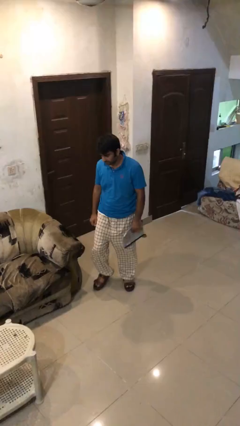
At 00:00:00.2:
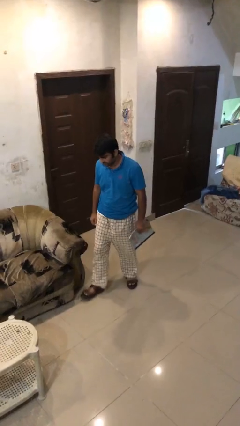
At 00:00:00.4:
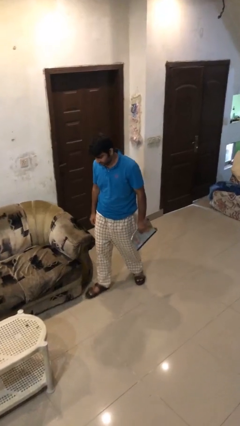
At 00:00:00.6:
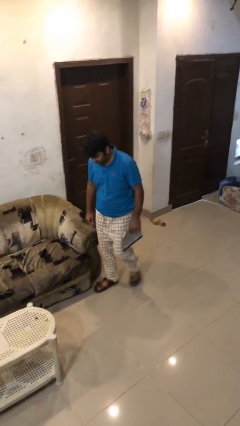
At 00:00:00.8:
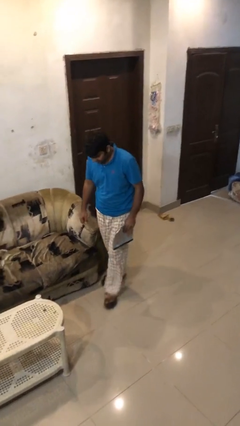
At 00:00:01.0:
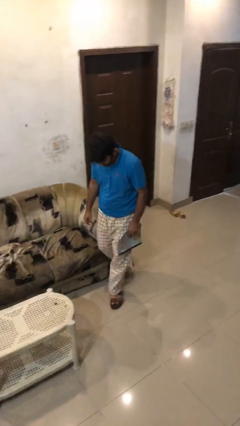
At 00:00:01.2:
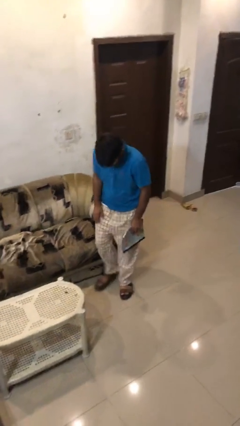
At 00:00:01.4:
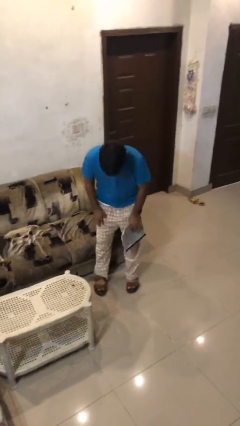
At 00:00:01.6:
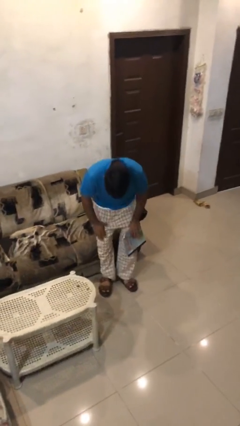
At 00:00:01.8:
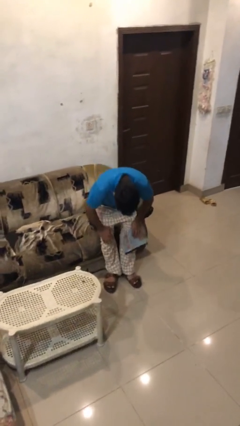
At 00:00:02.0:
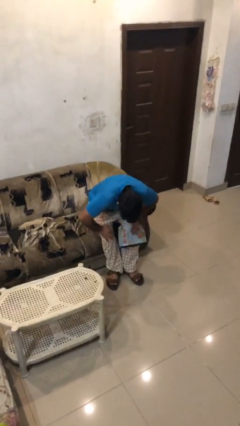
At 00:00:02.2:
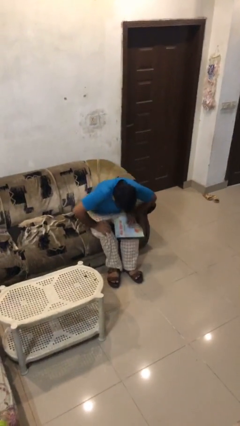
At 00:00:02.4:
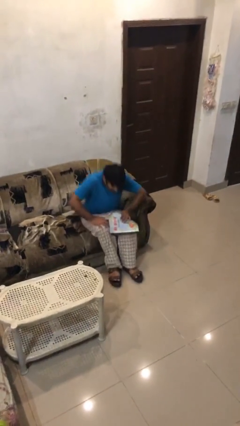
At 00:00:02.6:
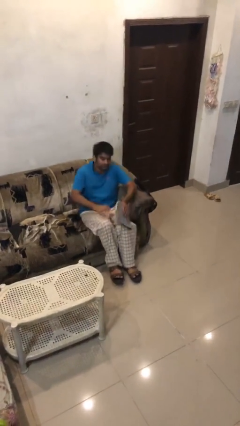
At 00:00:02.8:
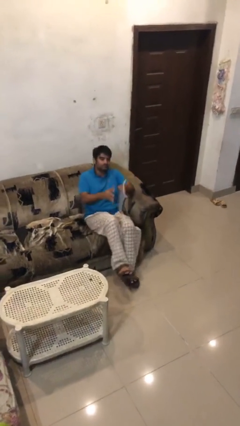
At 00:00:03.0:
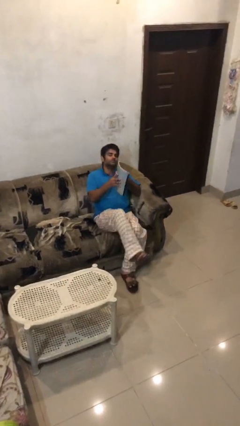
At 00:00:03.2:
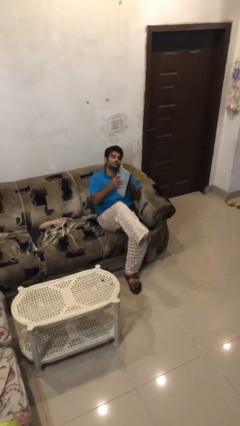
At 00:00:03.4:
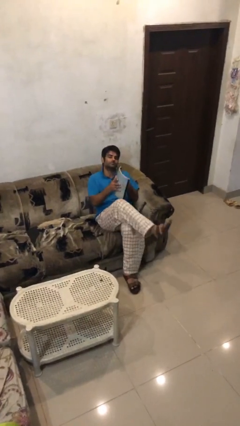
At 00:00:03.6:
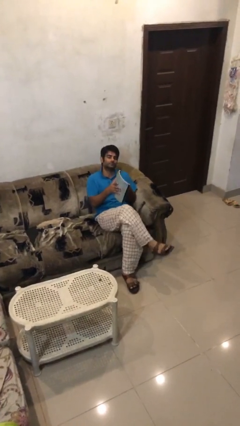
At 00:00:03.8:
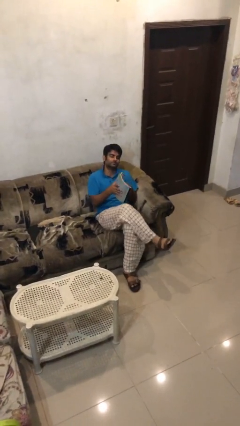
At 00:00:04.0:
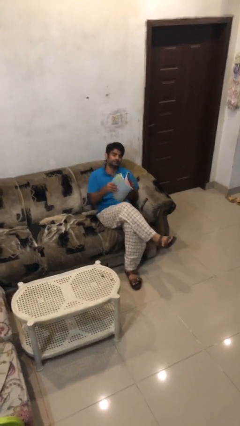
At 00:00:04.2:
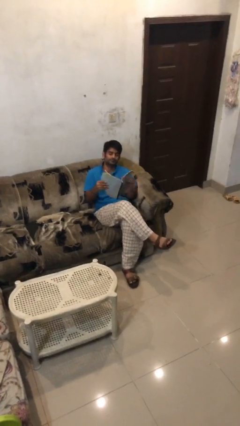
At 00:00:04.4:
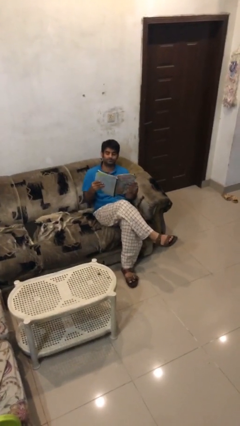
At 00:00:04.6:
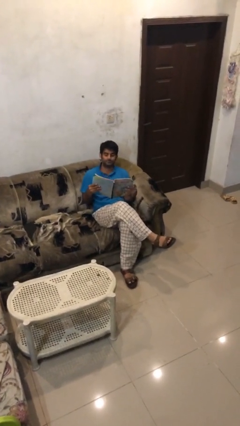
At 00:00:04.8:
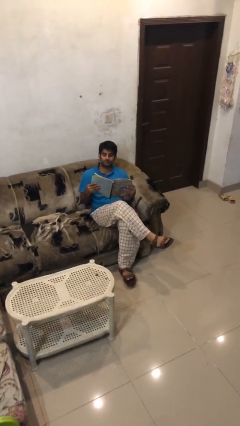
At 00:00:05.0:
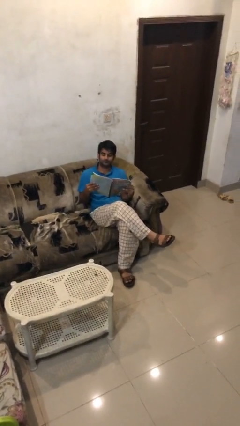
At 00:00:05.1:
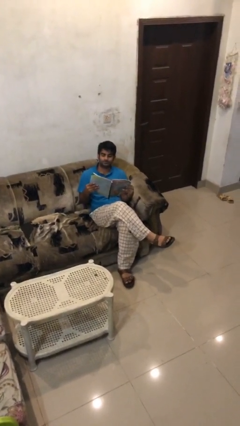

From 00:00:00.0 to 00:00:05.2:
person sits down

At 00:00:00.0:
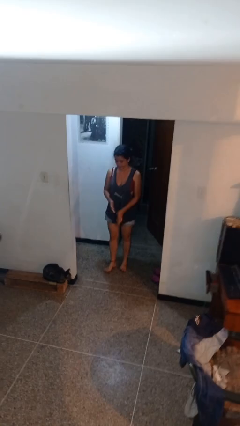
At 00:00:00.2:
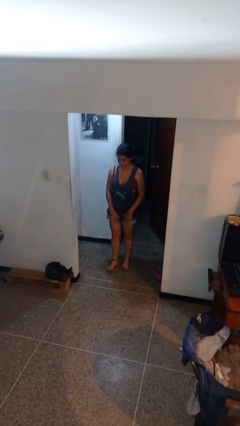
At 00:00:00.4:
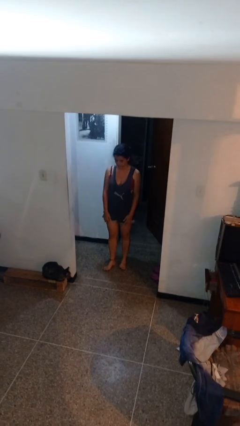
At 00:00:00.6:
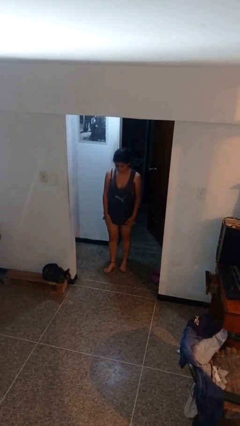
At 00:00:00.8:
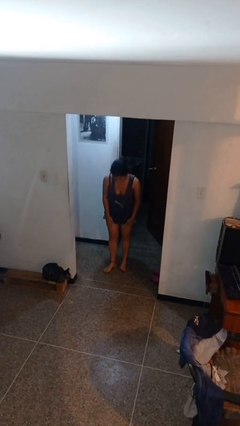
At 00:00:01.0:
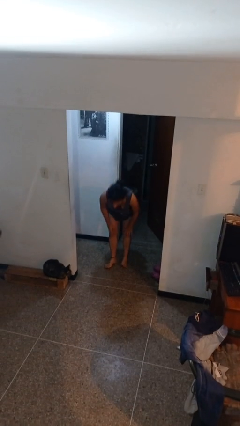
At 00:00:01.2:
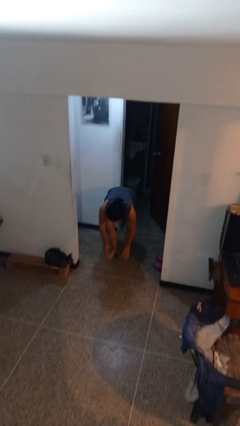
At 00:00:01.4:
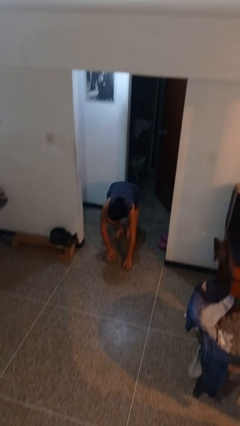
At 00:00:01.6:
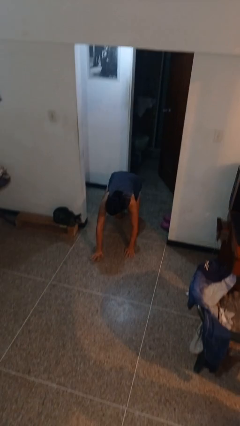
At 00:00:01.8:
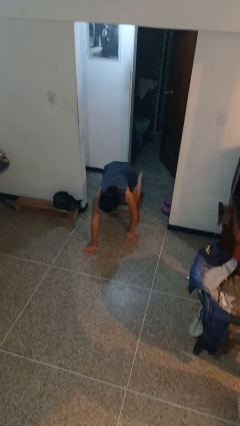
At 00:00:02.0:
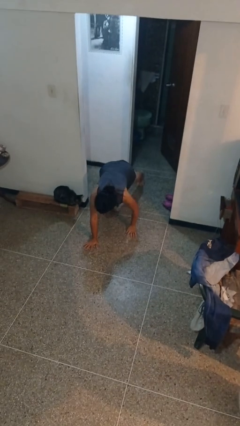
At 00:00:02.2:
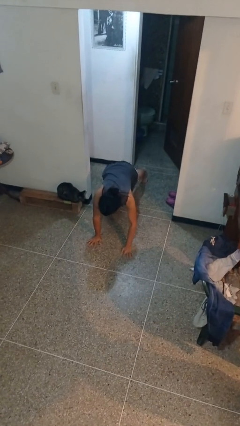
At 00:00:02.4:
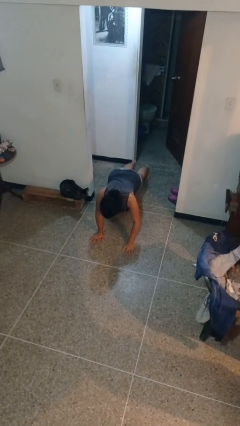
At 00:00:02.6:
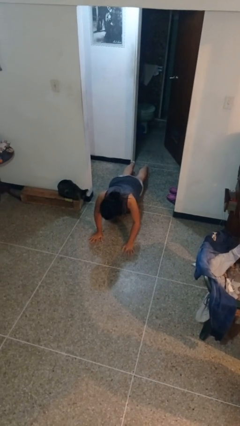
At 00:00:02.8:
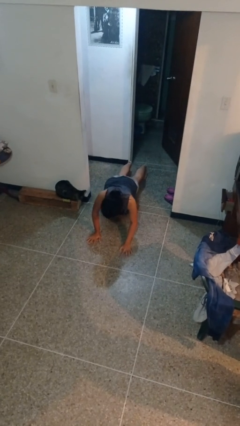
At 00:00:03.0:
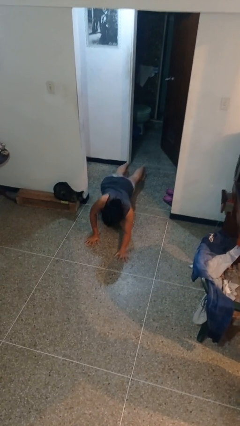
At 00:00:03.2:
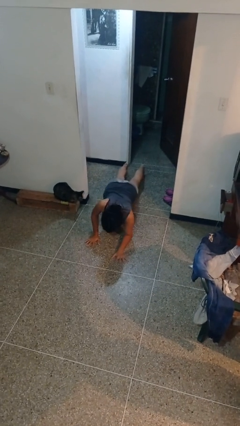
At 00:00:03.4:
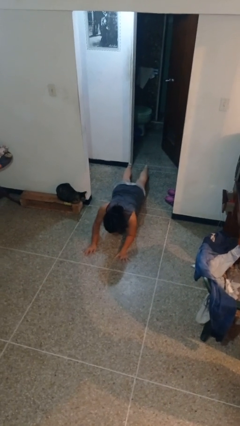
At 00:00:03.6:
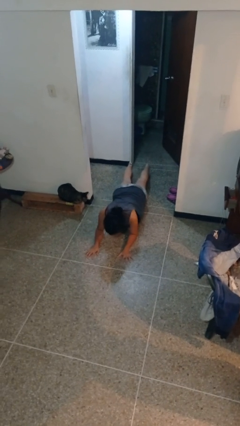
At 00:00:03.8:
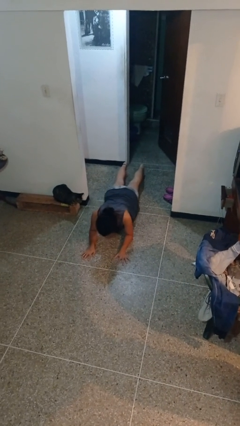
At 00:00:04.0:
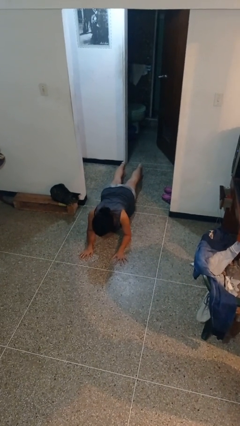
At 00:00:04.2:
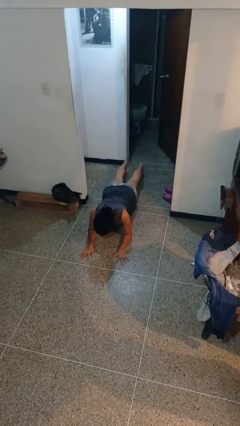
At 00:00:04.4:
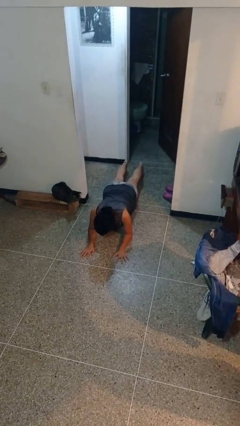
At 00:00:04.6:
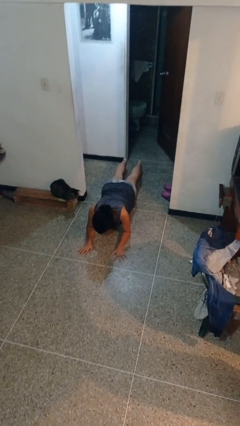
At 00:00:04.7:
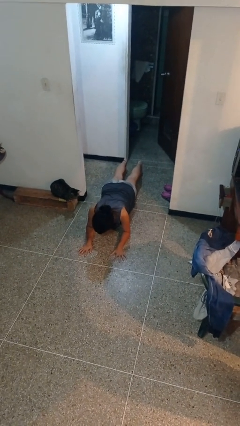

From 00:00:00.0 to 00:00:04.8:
person exercises with plank

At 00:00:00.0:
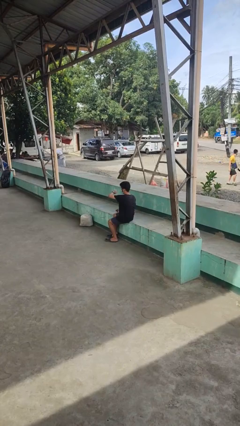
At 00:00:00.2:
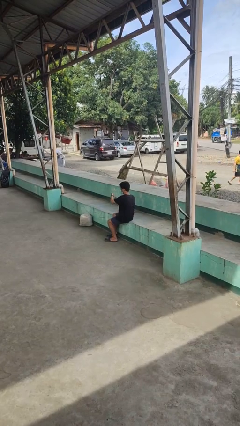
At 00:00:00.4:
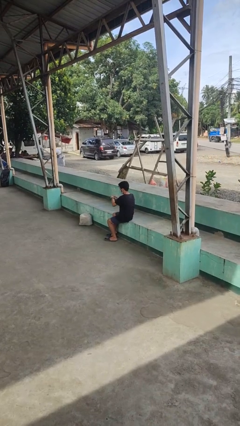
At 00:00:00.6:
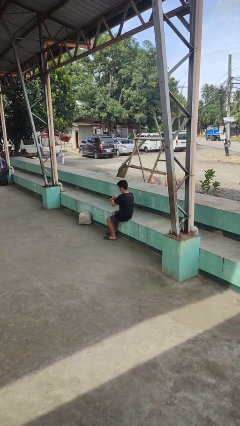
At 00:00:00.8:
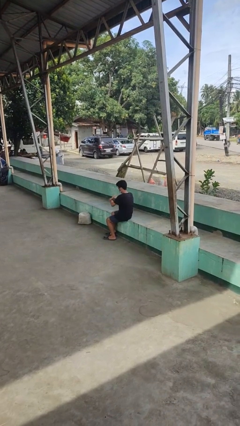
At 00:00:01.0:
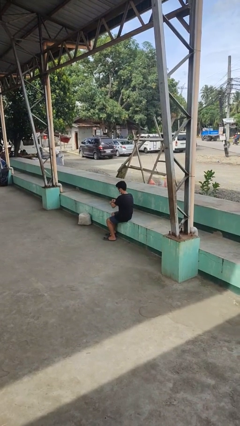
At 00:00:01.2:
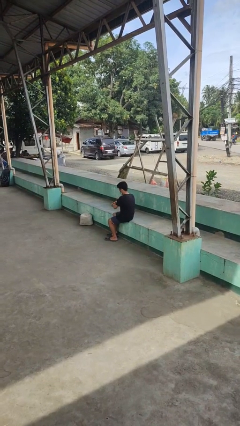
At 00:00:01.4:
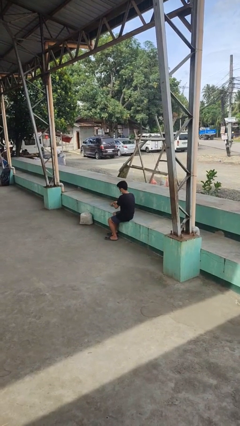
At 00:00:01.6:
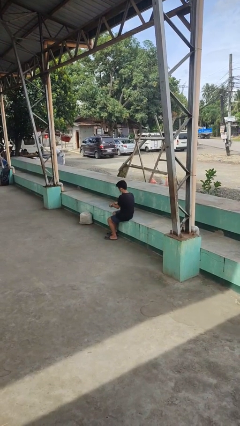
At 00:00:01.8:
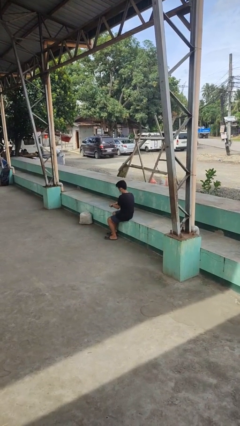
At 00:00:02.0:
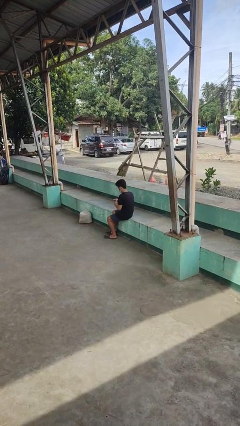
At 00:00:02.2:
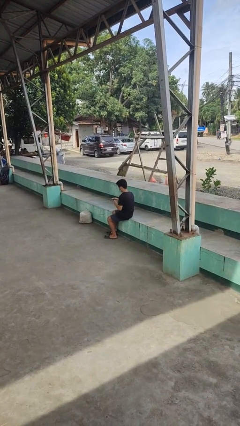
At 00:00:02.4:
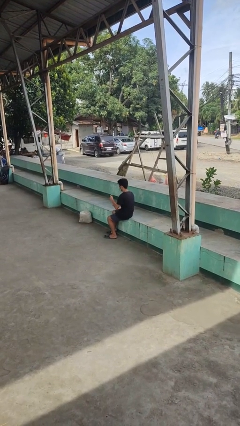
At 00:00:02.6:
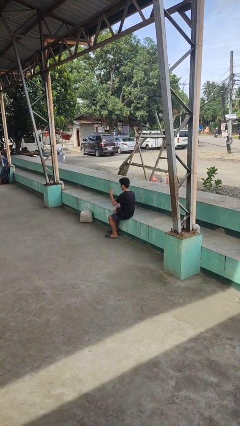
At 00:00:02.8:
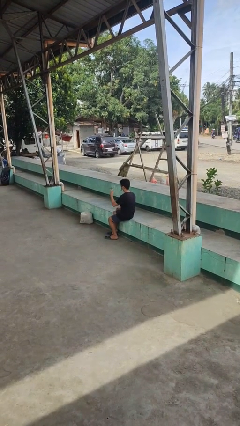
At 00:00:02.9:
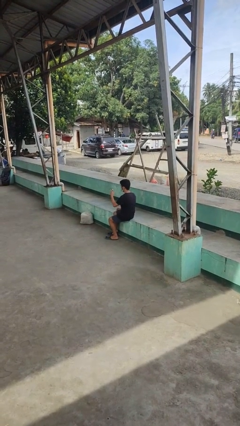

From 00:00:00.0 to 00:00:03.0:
person takes off wristwatch

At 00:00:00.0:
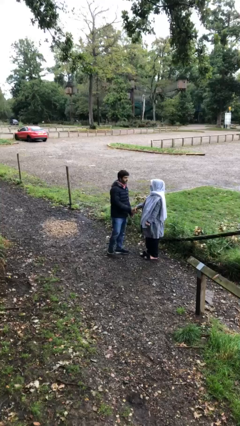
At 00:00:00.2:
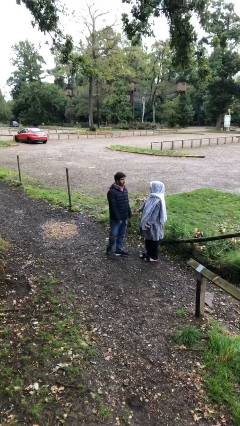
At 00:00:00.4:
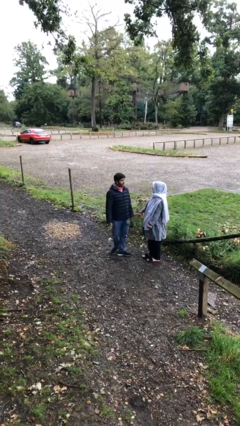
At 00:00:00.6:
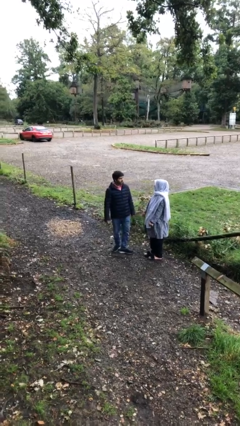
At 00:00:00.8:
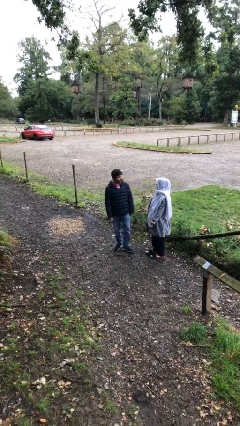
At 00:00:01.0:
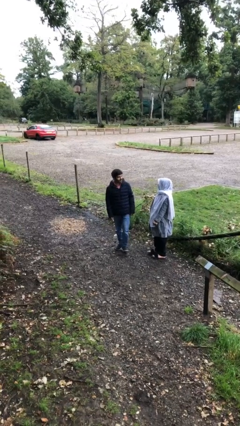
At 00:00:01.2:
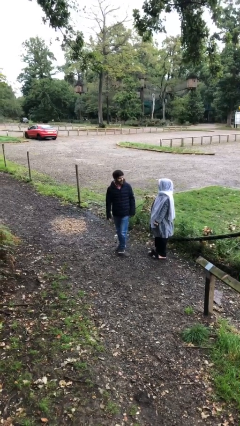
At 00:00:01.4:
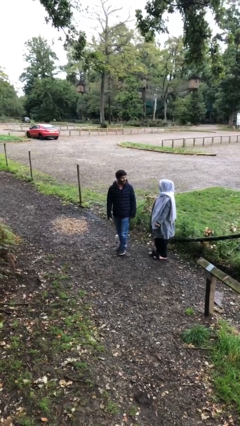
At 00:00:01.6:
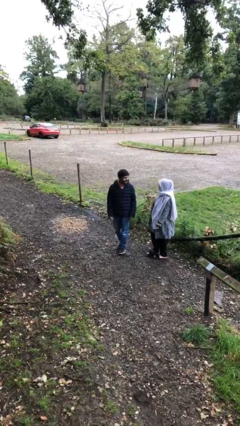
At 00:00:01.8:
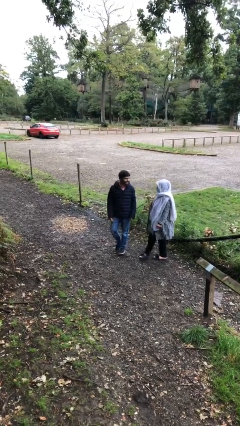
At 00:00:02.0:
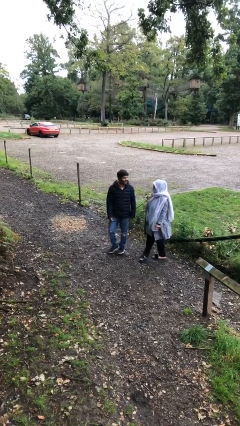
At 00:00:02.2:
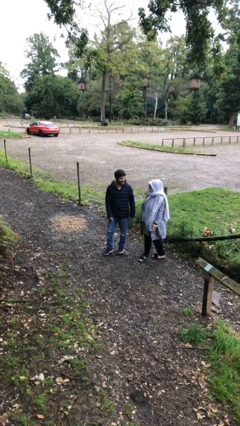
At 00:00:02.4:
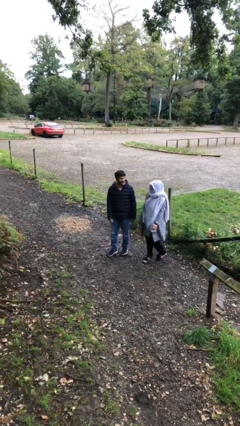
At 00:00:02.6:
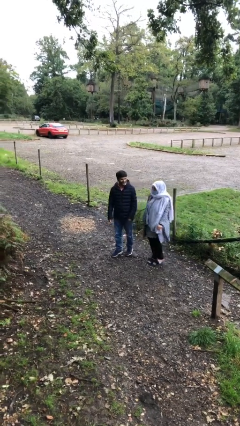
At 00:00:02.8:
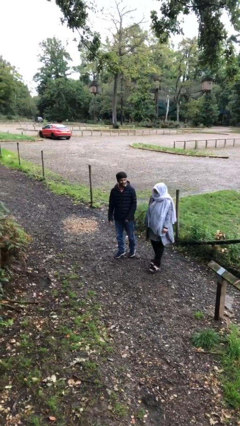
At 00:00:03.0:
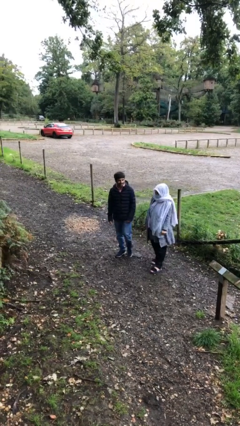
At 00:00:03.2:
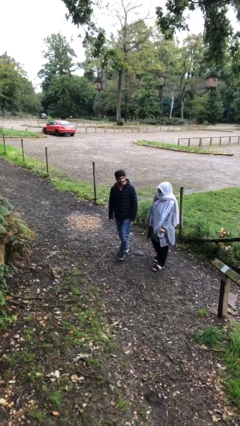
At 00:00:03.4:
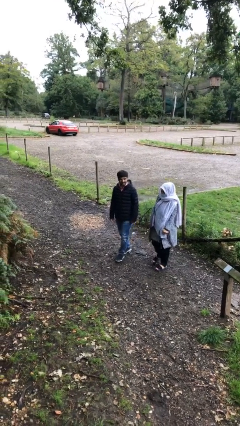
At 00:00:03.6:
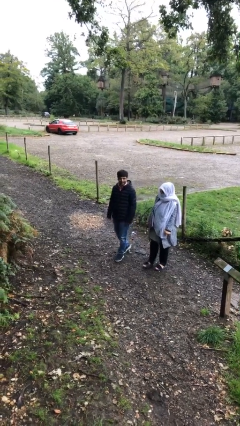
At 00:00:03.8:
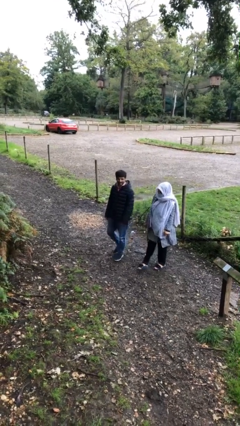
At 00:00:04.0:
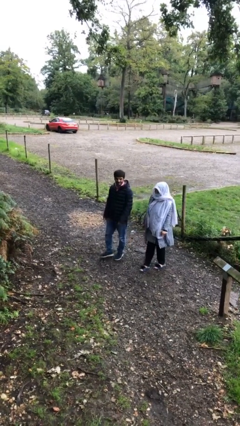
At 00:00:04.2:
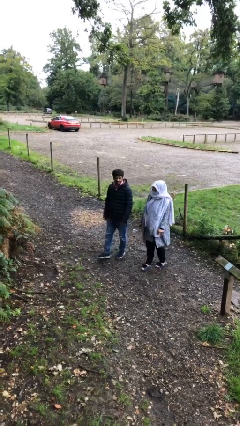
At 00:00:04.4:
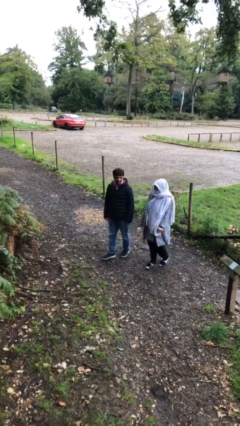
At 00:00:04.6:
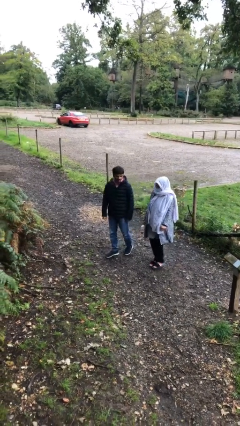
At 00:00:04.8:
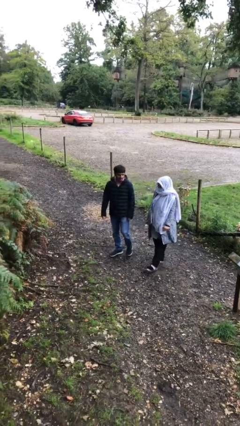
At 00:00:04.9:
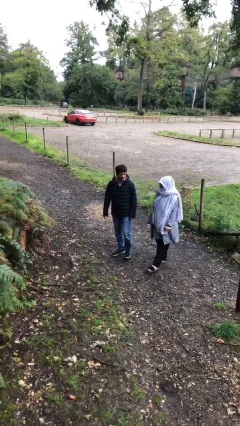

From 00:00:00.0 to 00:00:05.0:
person talks to person
